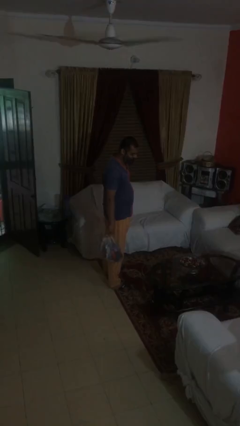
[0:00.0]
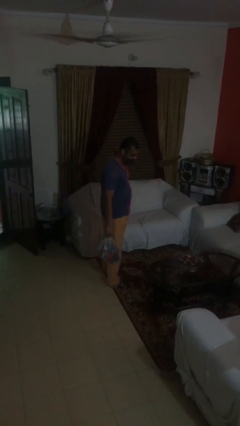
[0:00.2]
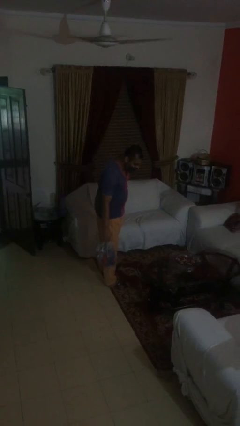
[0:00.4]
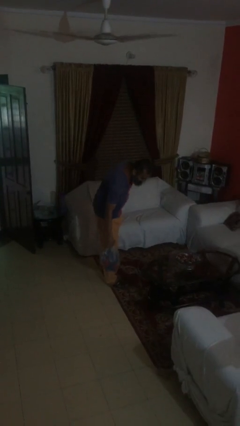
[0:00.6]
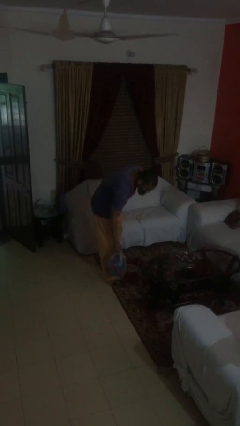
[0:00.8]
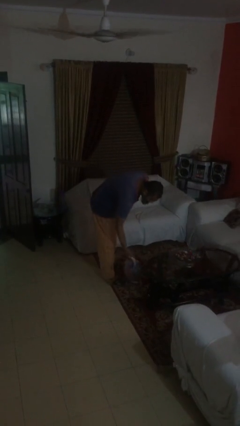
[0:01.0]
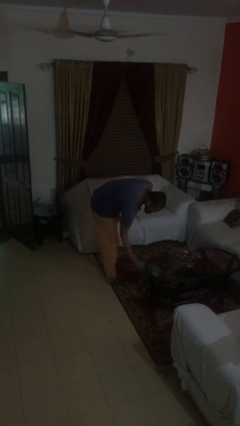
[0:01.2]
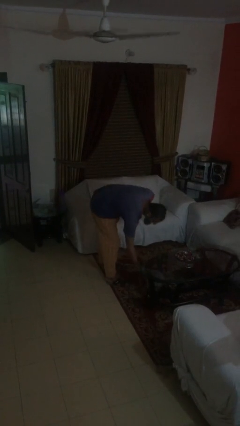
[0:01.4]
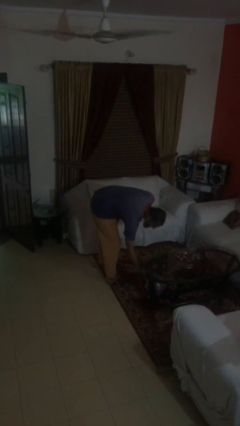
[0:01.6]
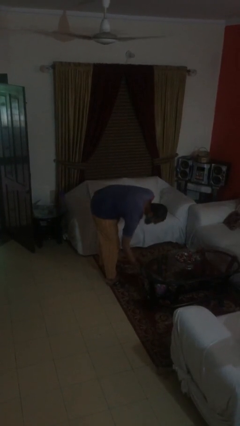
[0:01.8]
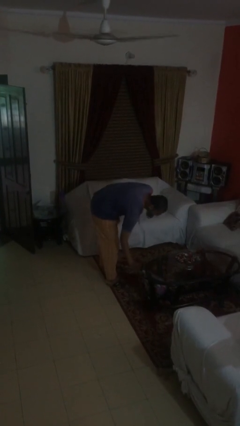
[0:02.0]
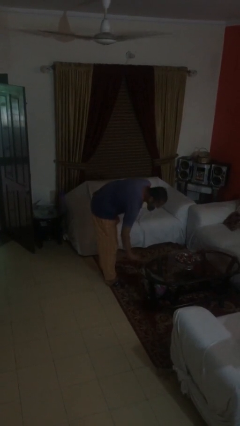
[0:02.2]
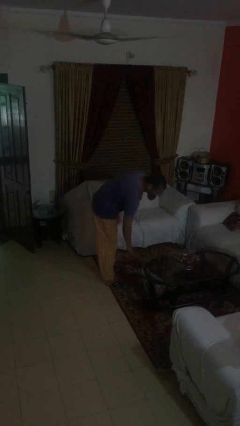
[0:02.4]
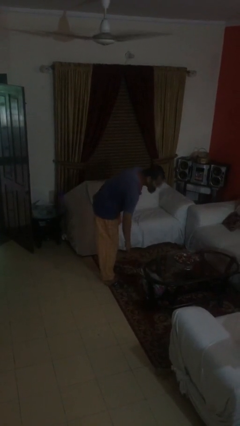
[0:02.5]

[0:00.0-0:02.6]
person puts down object on table

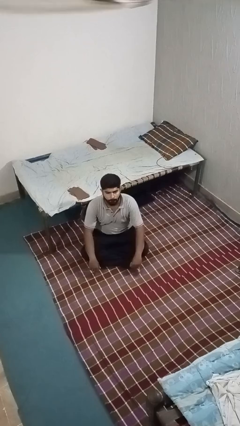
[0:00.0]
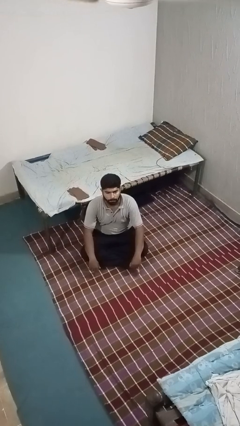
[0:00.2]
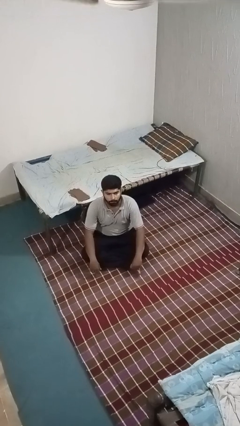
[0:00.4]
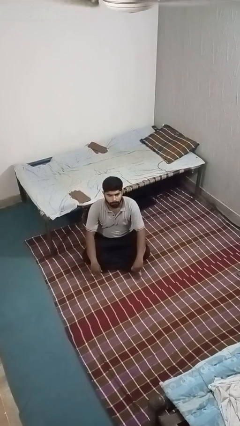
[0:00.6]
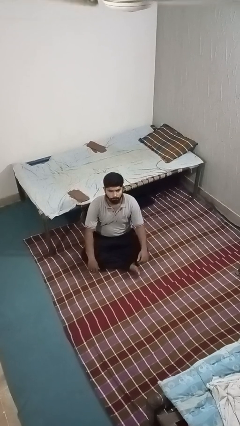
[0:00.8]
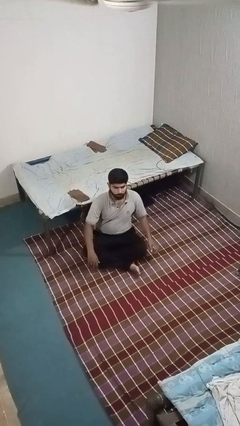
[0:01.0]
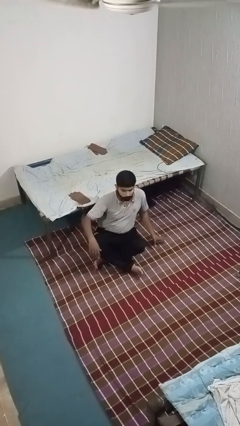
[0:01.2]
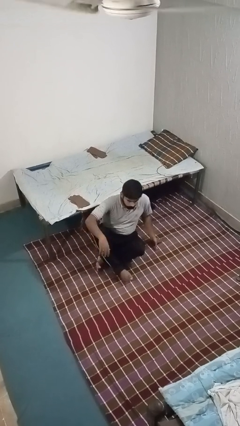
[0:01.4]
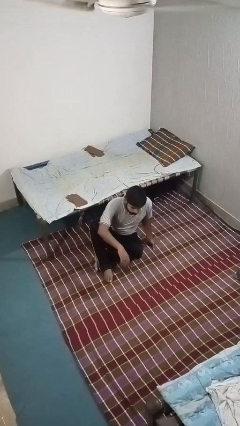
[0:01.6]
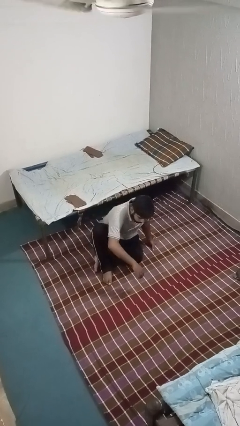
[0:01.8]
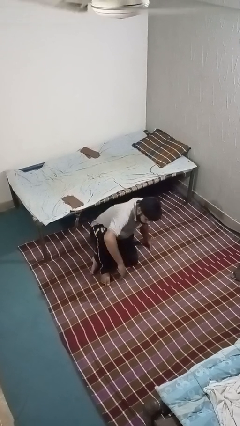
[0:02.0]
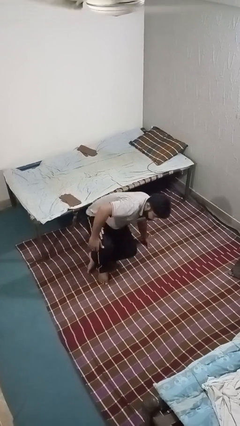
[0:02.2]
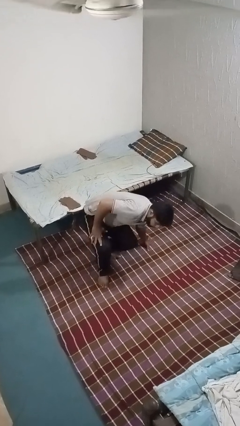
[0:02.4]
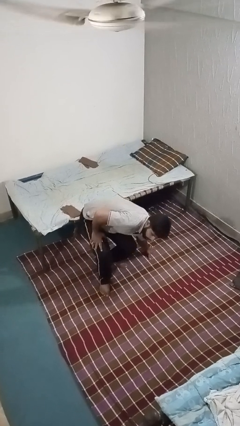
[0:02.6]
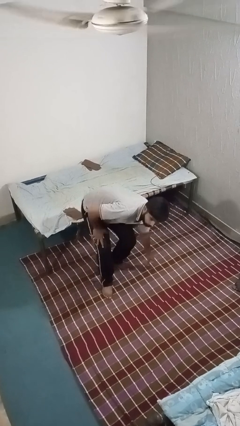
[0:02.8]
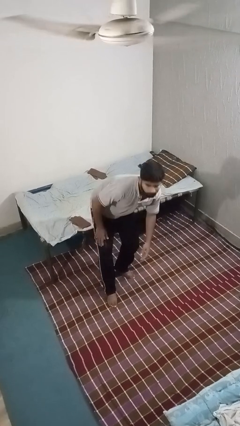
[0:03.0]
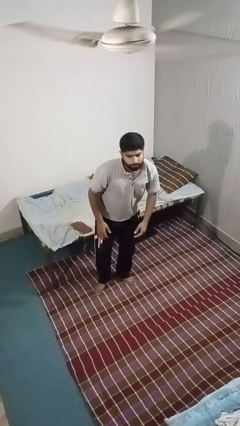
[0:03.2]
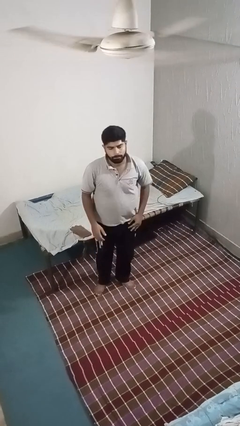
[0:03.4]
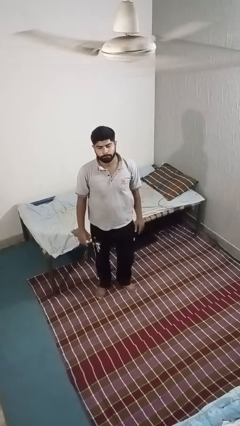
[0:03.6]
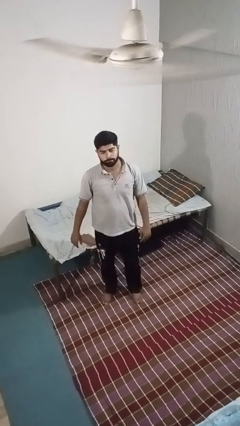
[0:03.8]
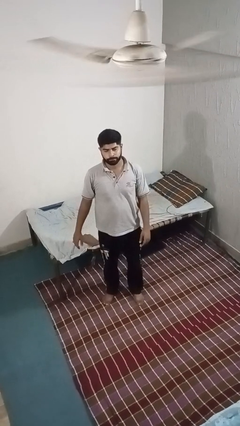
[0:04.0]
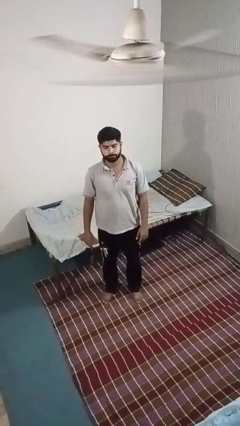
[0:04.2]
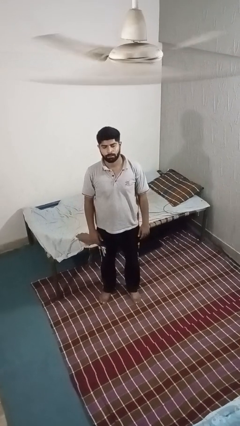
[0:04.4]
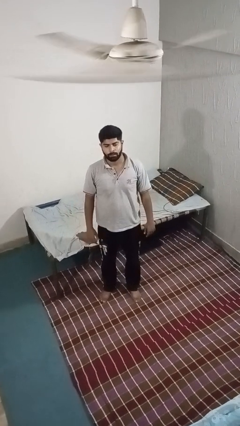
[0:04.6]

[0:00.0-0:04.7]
person stands up from floor

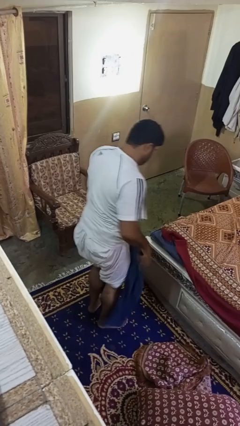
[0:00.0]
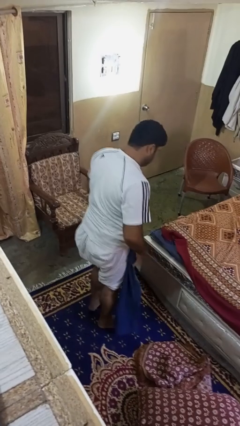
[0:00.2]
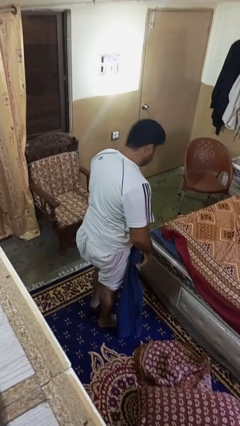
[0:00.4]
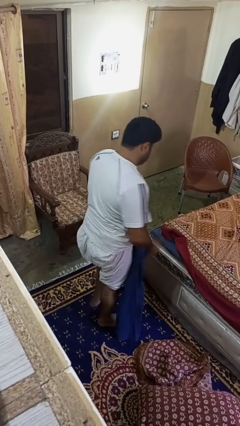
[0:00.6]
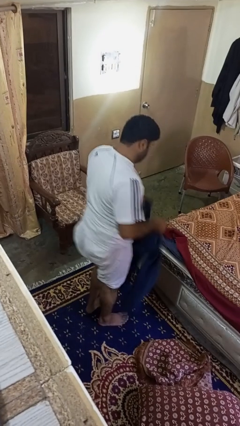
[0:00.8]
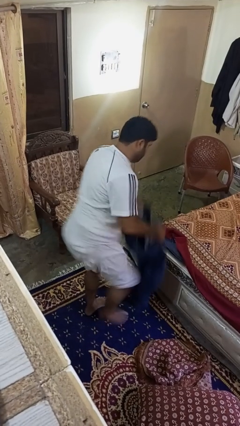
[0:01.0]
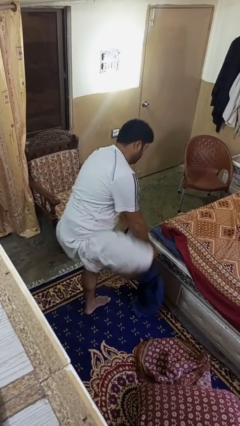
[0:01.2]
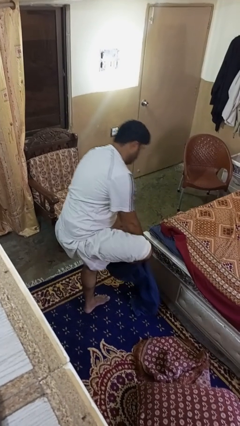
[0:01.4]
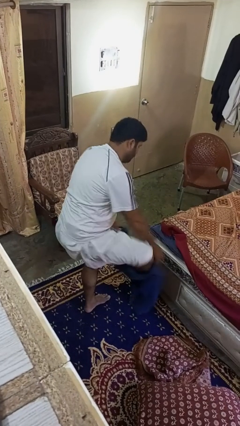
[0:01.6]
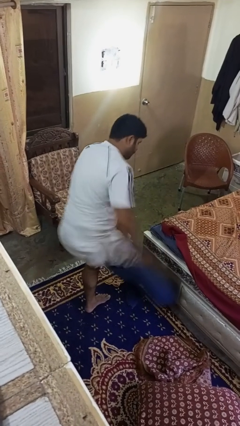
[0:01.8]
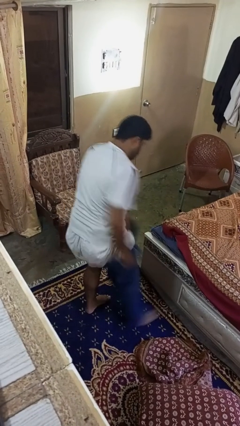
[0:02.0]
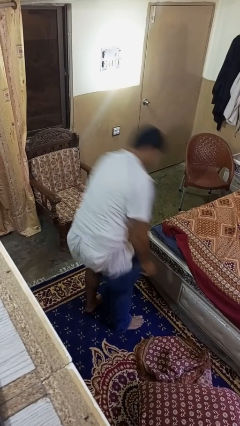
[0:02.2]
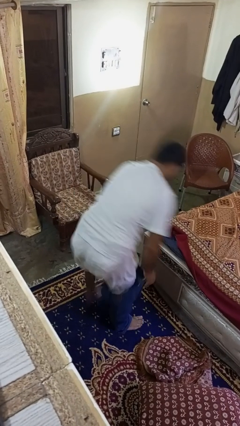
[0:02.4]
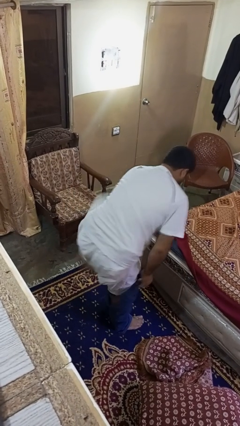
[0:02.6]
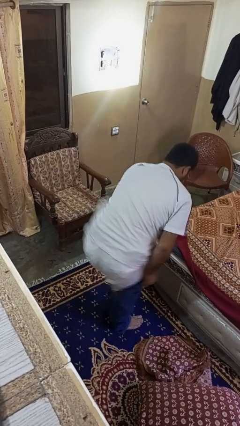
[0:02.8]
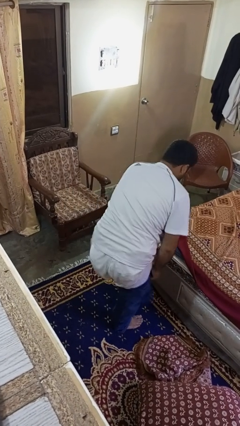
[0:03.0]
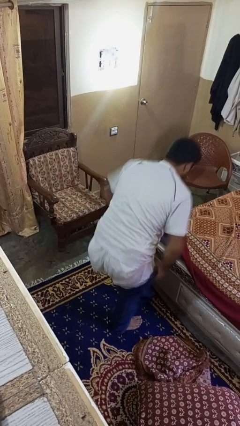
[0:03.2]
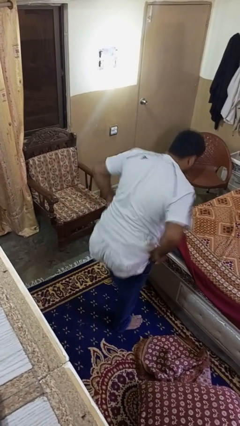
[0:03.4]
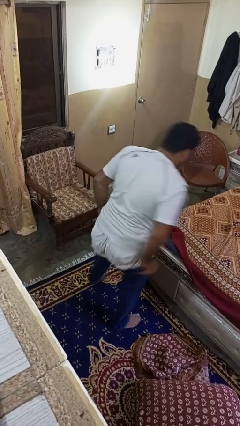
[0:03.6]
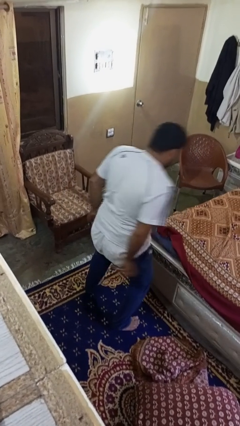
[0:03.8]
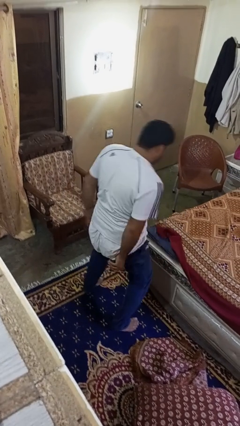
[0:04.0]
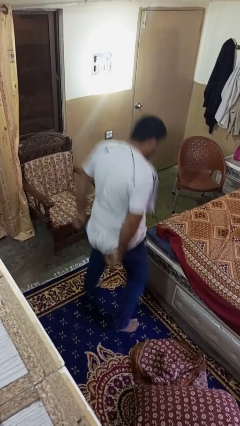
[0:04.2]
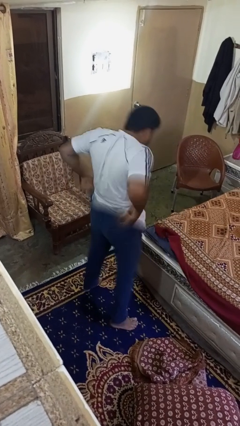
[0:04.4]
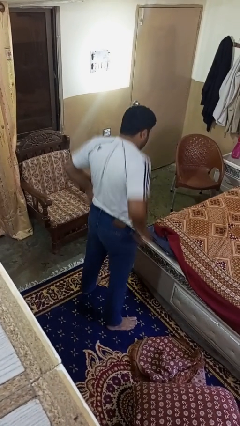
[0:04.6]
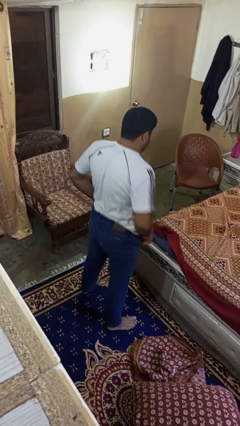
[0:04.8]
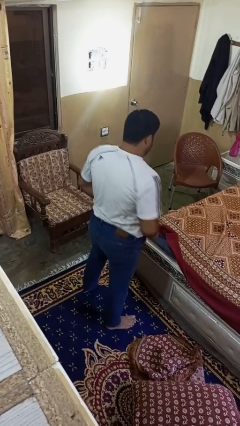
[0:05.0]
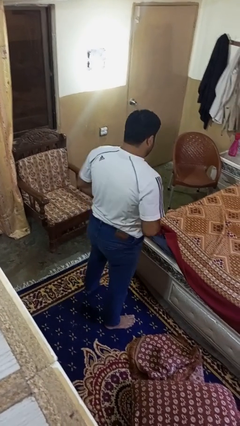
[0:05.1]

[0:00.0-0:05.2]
person puts on pants

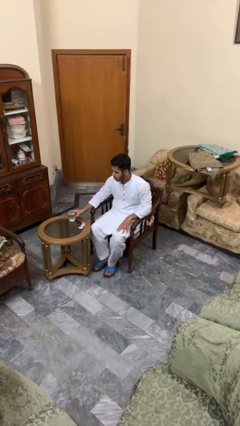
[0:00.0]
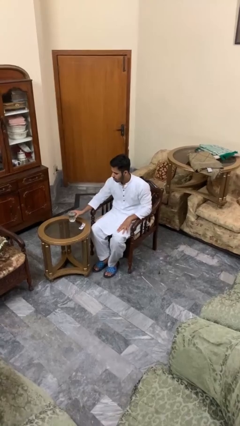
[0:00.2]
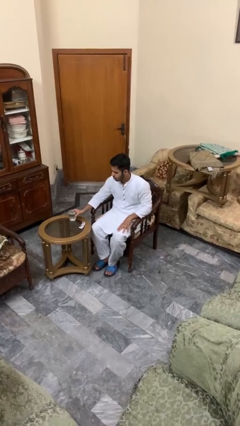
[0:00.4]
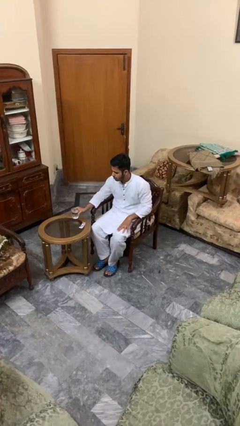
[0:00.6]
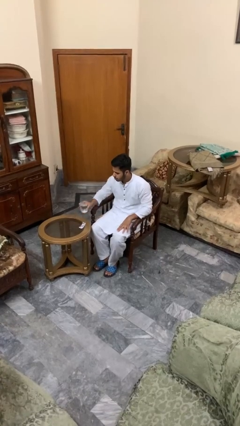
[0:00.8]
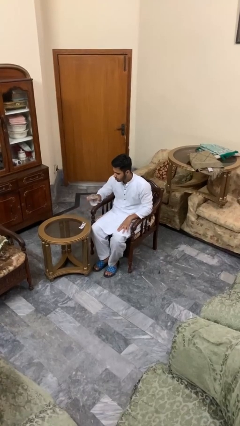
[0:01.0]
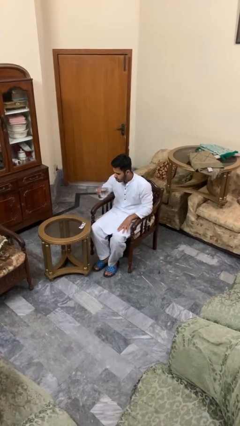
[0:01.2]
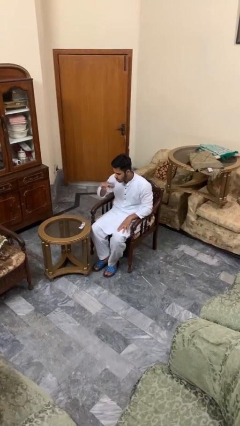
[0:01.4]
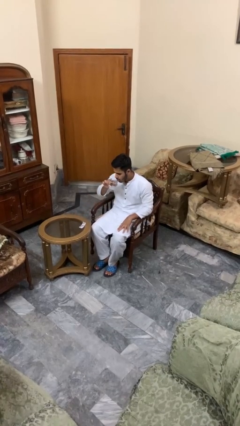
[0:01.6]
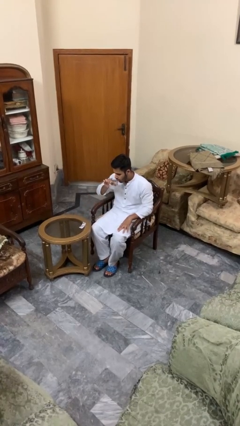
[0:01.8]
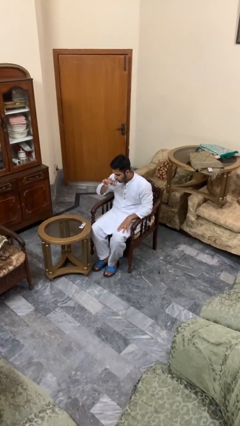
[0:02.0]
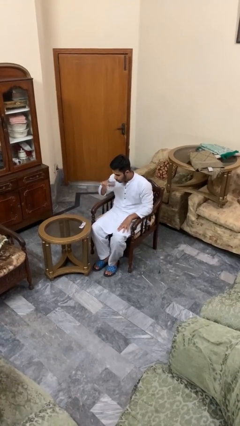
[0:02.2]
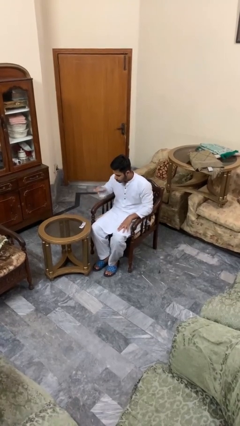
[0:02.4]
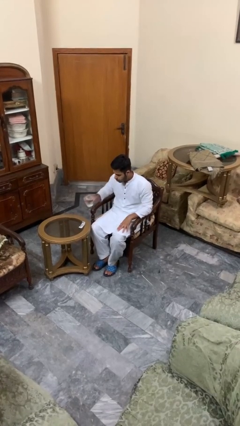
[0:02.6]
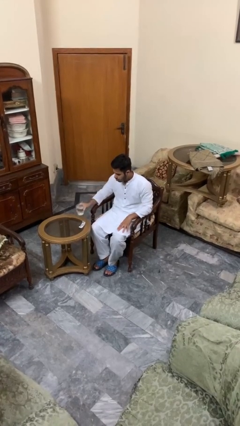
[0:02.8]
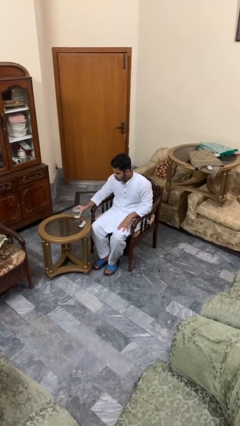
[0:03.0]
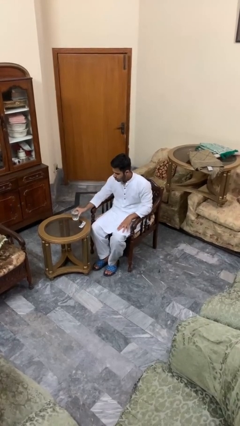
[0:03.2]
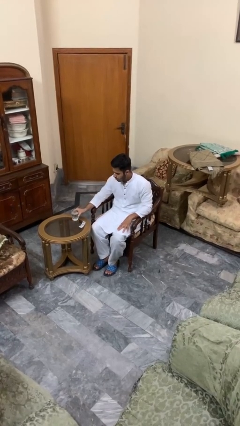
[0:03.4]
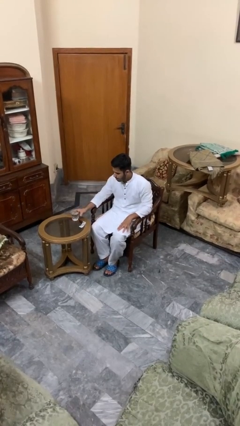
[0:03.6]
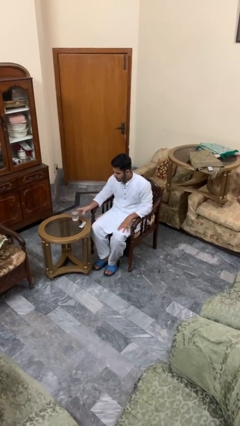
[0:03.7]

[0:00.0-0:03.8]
person drinks from cup

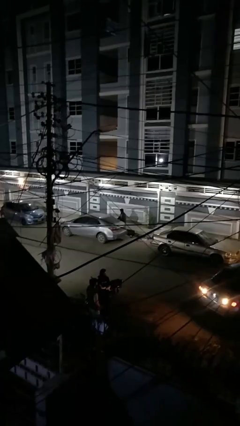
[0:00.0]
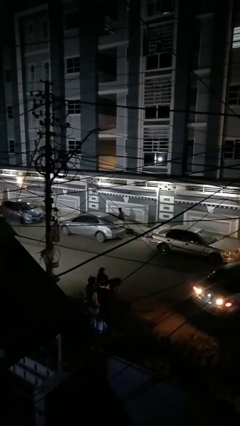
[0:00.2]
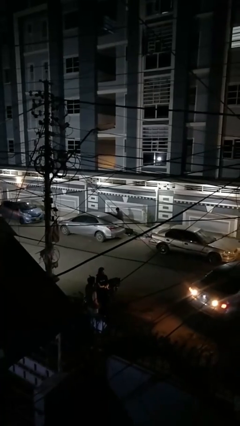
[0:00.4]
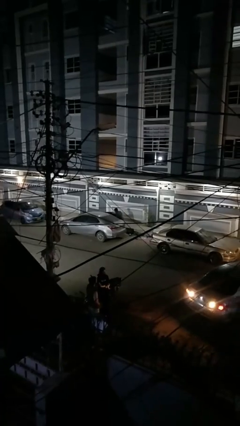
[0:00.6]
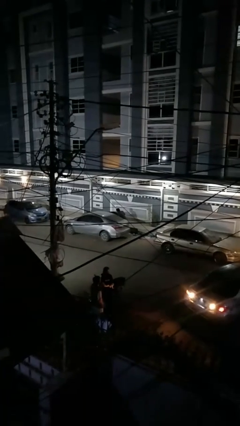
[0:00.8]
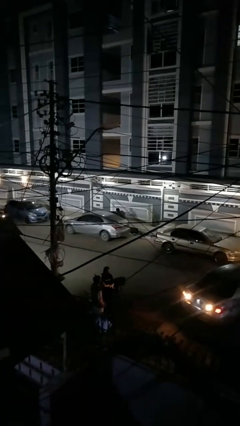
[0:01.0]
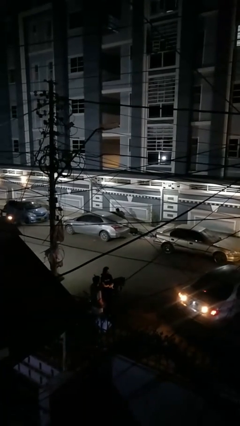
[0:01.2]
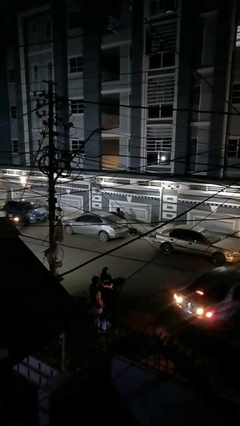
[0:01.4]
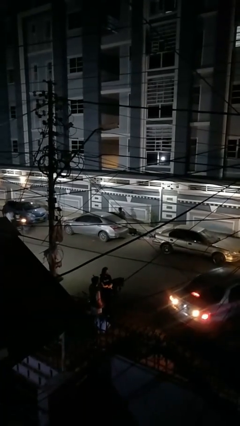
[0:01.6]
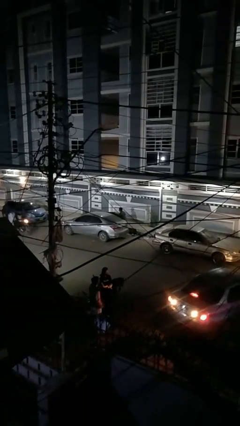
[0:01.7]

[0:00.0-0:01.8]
person loads car
